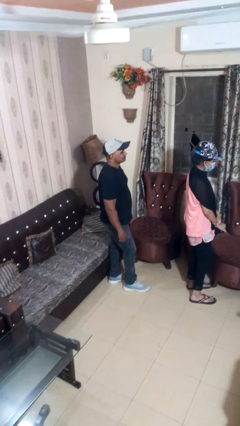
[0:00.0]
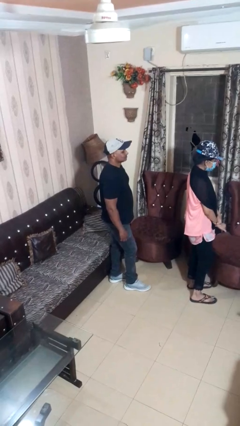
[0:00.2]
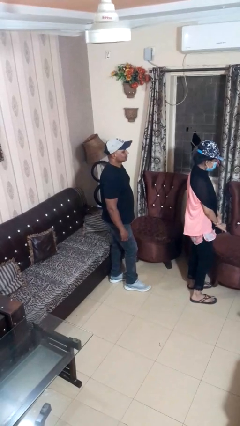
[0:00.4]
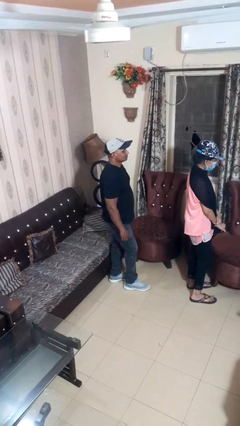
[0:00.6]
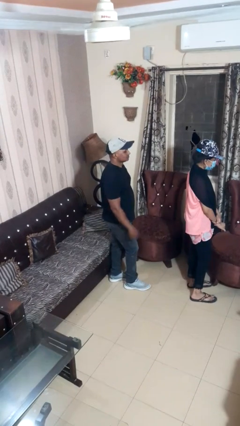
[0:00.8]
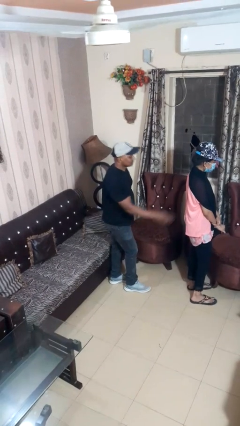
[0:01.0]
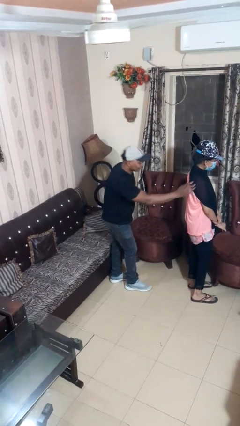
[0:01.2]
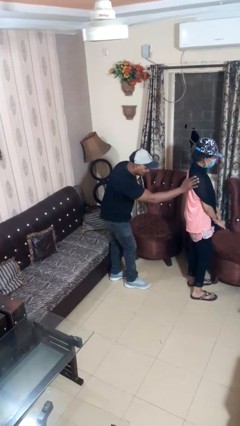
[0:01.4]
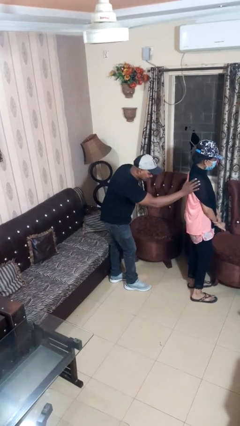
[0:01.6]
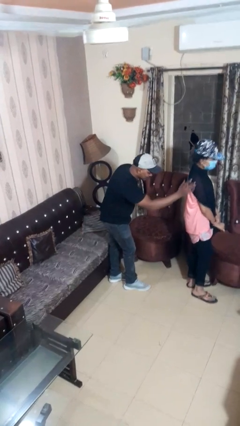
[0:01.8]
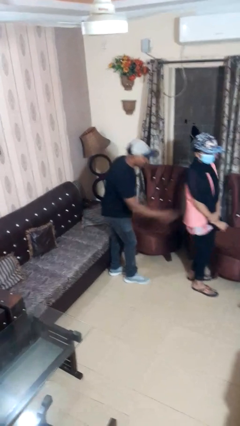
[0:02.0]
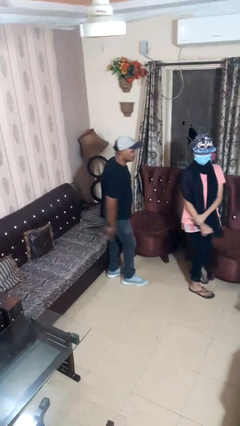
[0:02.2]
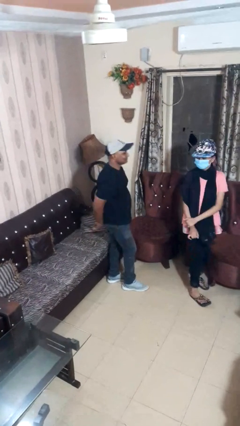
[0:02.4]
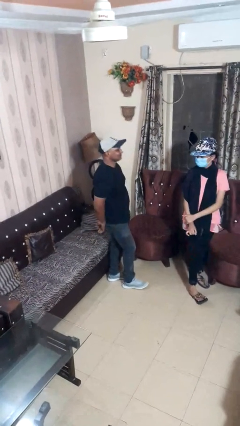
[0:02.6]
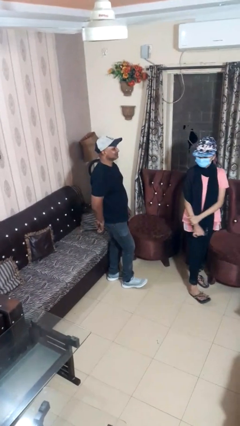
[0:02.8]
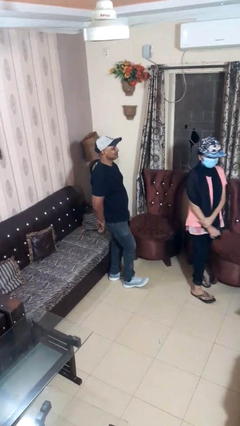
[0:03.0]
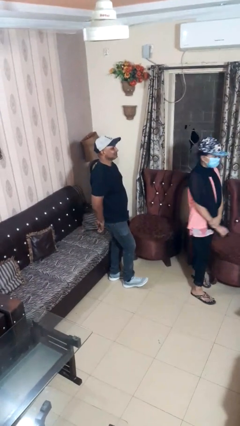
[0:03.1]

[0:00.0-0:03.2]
person touches back of person

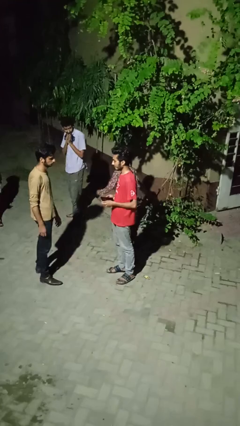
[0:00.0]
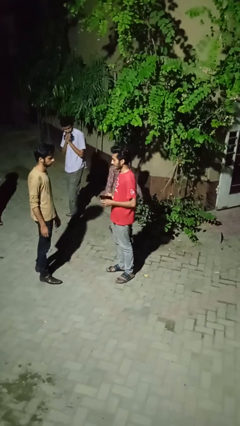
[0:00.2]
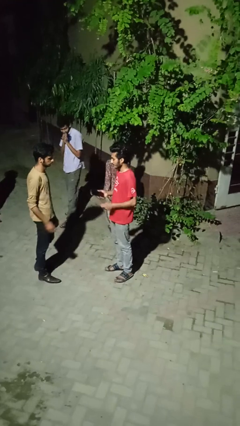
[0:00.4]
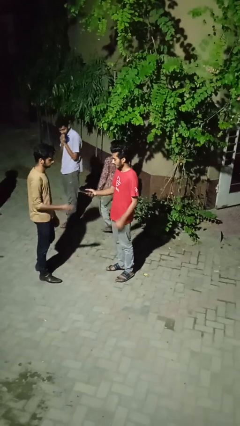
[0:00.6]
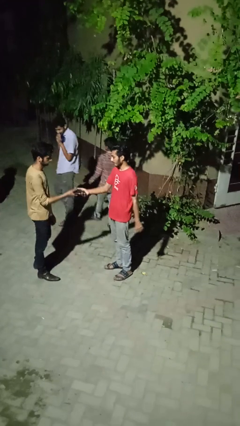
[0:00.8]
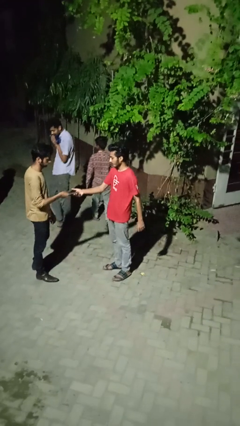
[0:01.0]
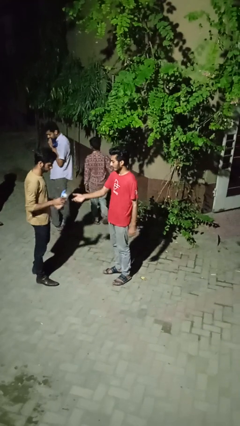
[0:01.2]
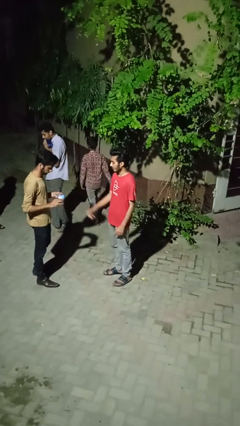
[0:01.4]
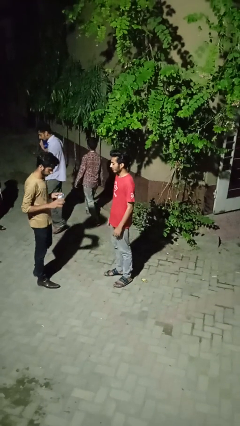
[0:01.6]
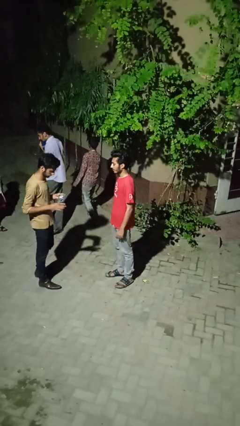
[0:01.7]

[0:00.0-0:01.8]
person transfers object to person

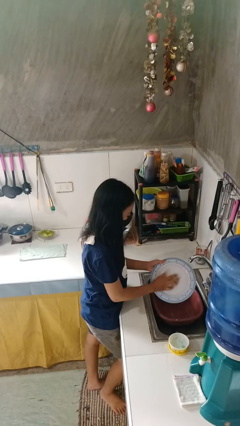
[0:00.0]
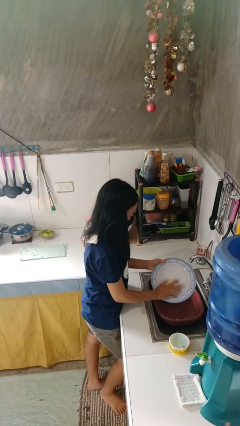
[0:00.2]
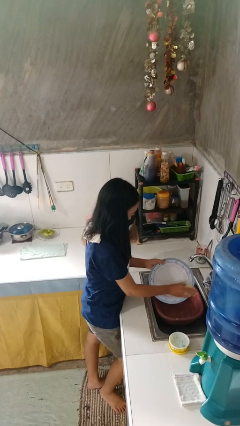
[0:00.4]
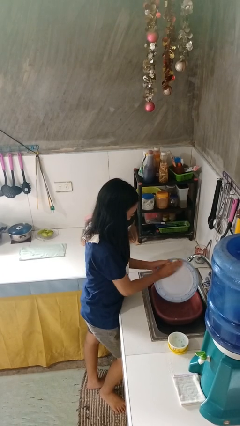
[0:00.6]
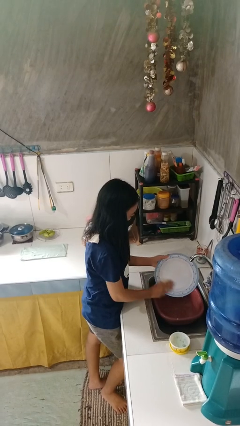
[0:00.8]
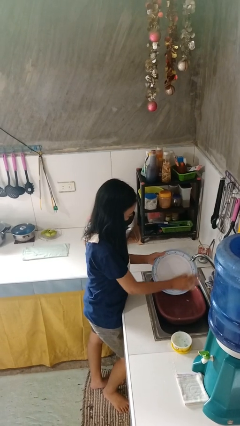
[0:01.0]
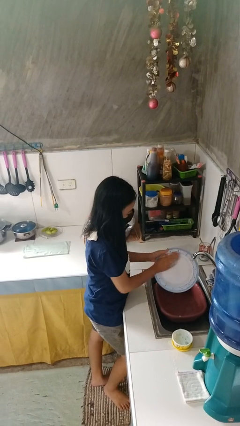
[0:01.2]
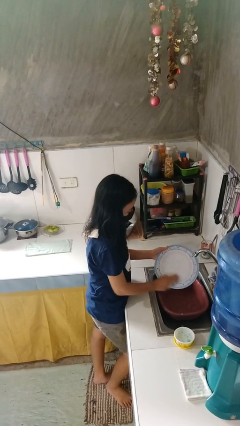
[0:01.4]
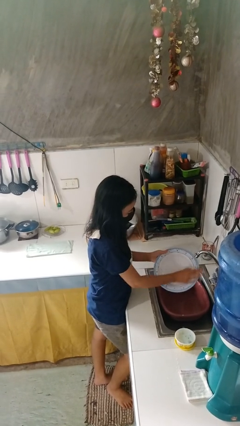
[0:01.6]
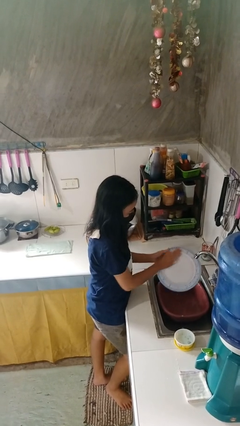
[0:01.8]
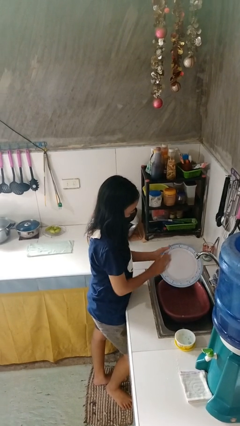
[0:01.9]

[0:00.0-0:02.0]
person washes dish

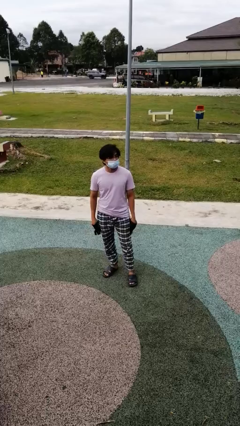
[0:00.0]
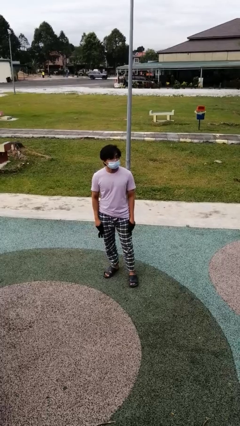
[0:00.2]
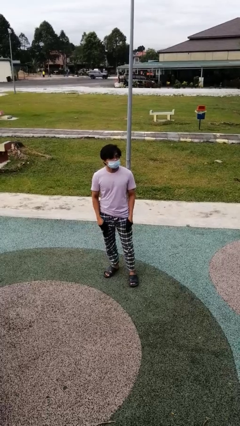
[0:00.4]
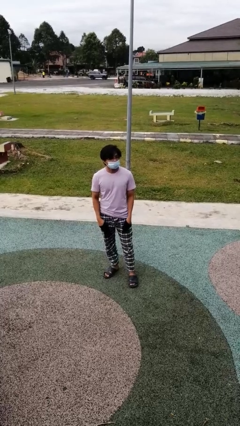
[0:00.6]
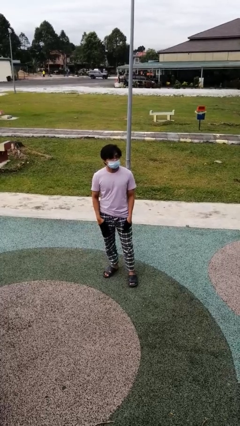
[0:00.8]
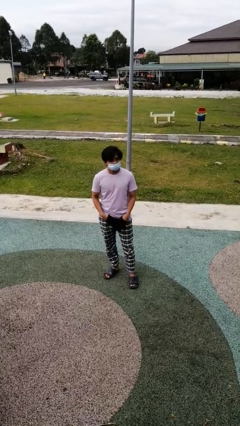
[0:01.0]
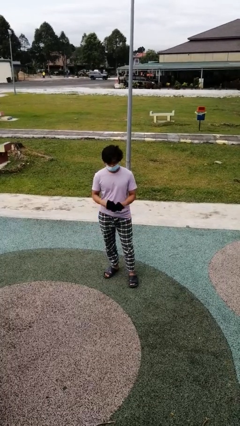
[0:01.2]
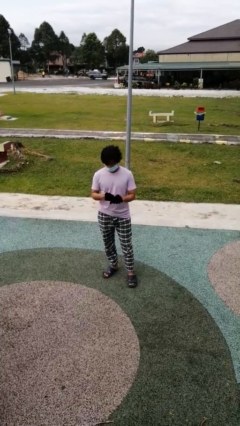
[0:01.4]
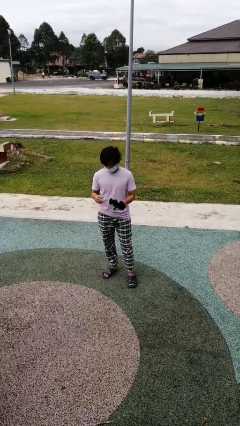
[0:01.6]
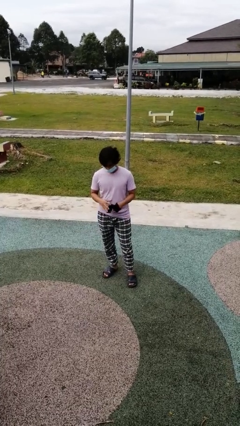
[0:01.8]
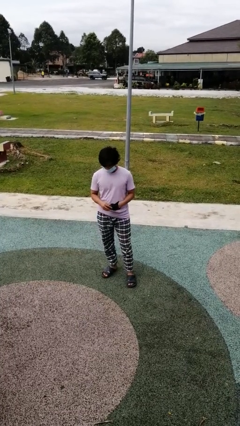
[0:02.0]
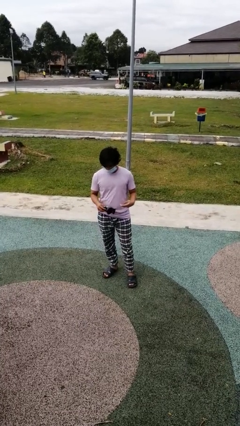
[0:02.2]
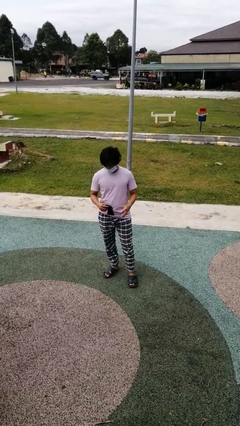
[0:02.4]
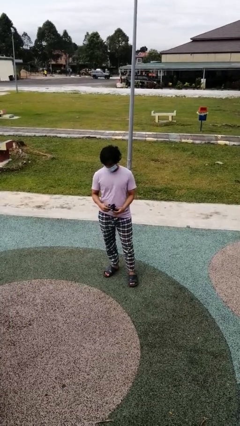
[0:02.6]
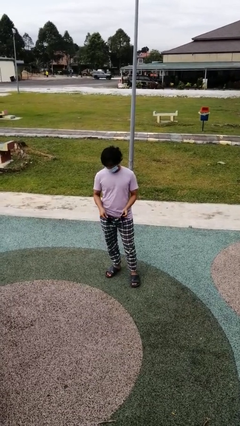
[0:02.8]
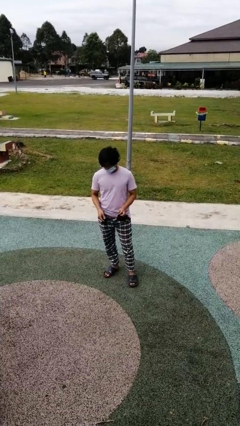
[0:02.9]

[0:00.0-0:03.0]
person takes off gloves

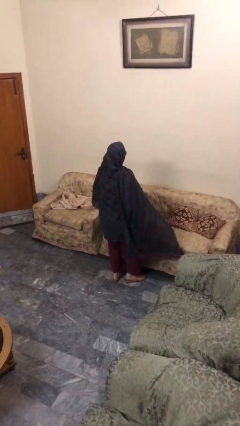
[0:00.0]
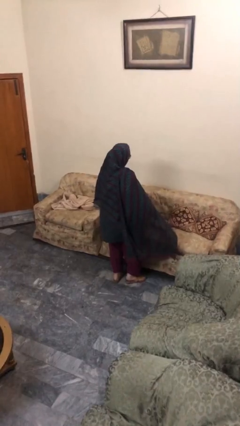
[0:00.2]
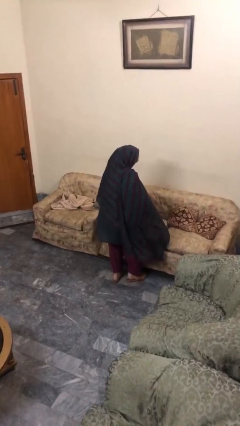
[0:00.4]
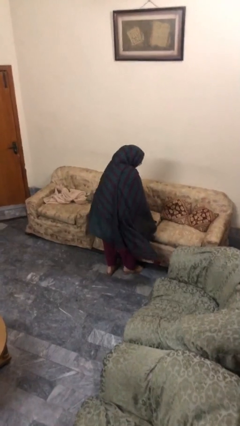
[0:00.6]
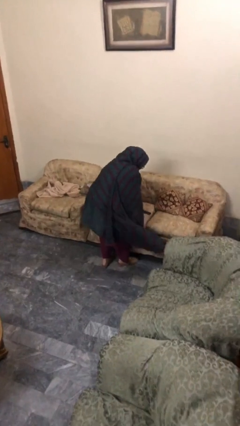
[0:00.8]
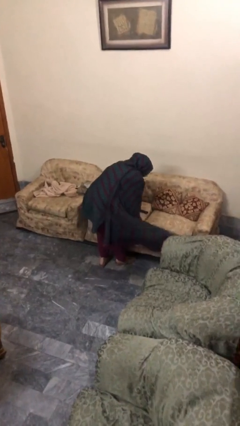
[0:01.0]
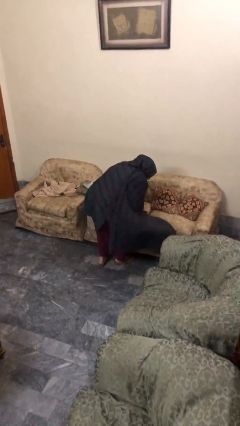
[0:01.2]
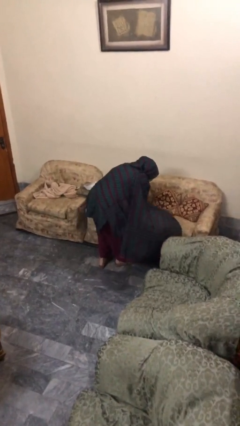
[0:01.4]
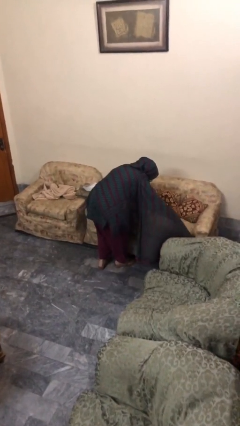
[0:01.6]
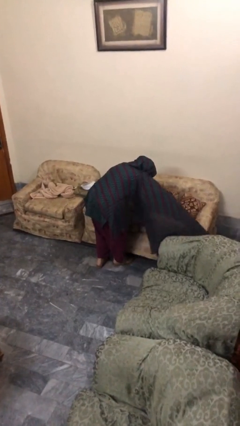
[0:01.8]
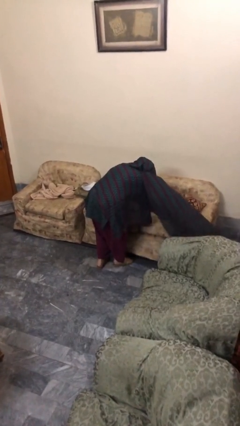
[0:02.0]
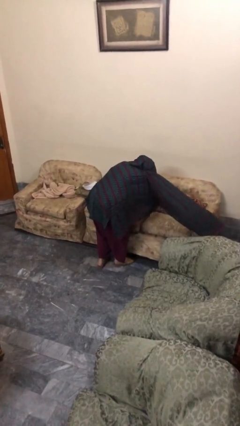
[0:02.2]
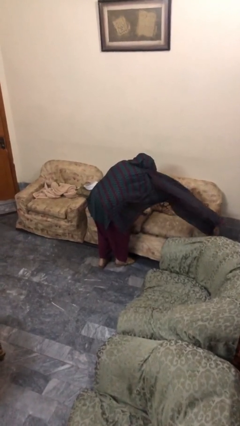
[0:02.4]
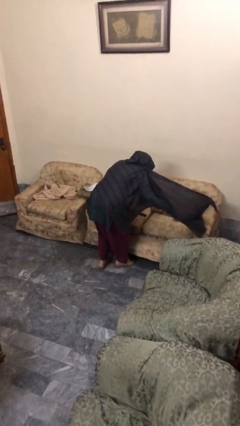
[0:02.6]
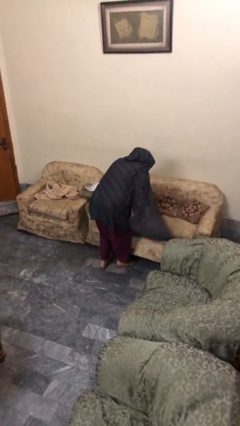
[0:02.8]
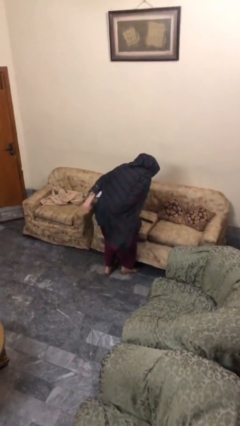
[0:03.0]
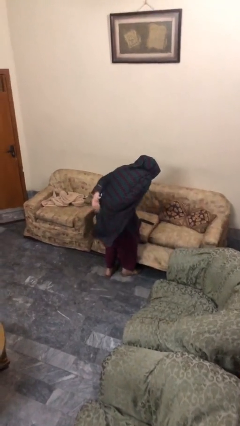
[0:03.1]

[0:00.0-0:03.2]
person searches in couch

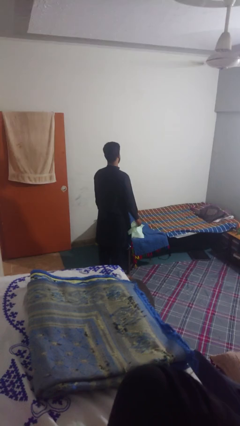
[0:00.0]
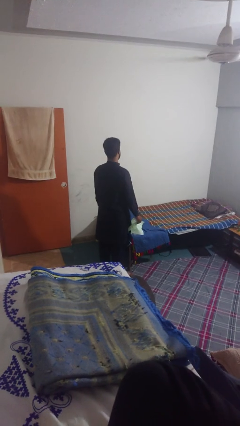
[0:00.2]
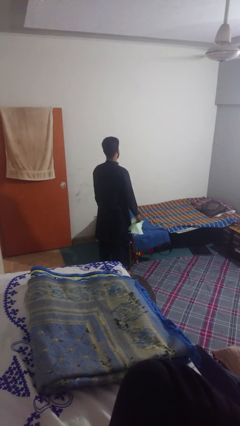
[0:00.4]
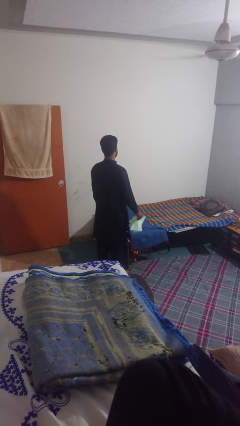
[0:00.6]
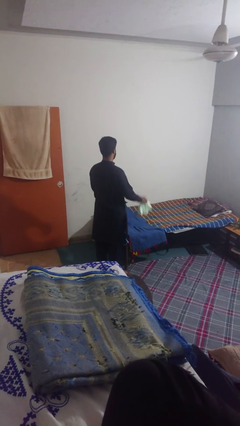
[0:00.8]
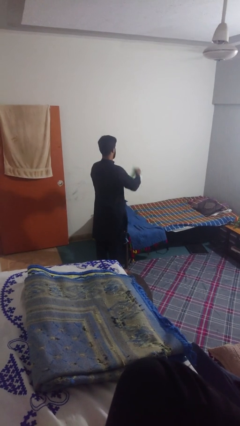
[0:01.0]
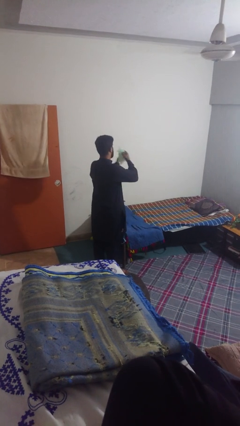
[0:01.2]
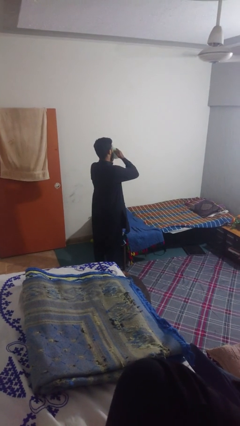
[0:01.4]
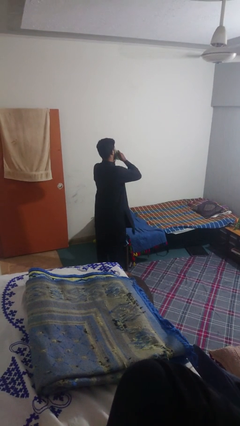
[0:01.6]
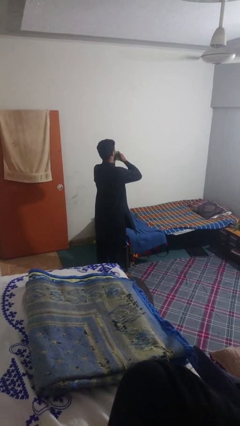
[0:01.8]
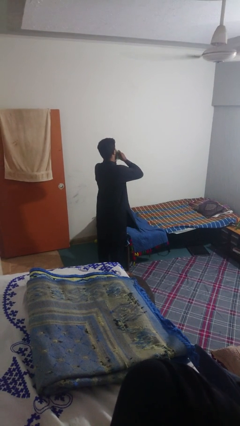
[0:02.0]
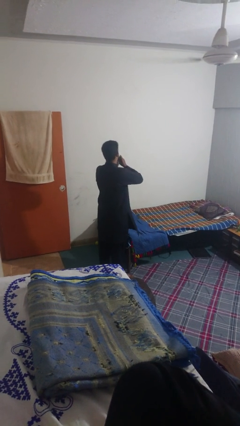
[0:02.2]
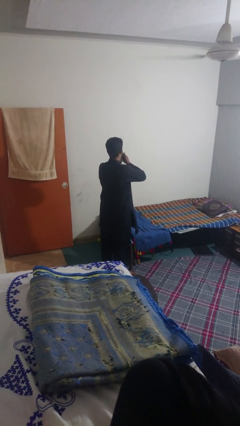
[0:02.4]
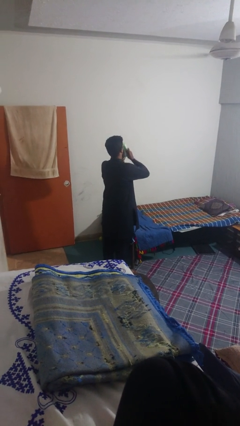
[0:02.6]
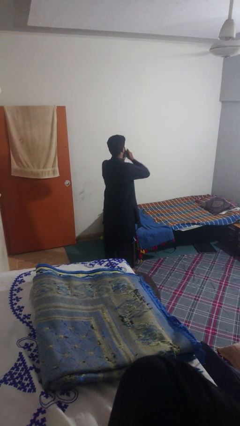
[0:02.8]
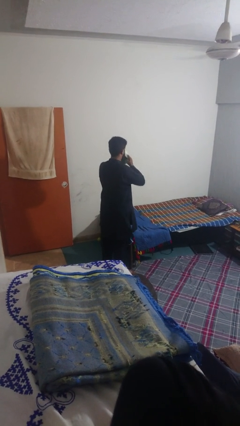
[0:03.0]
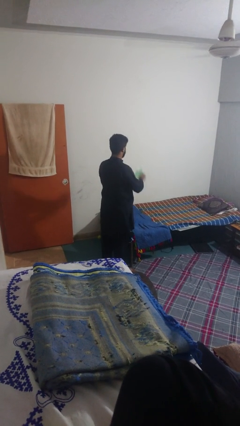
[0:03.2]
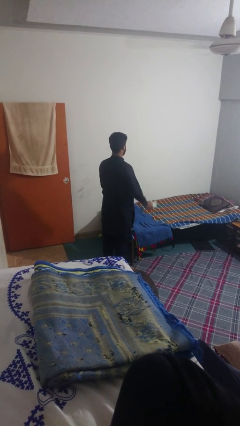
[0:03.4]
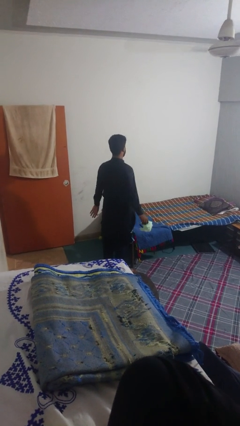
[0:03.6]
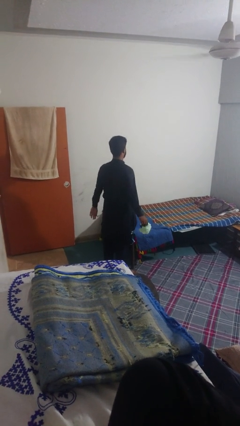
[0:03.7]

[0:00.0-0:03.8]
person blows nose
